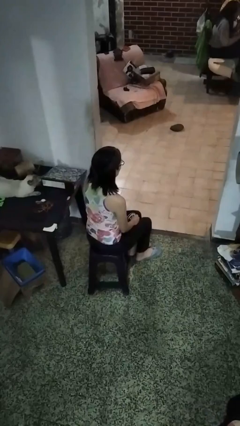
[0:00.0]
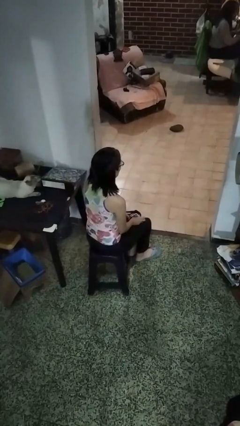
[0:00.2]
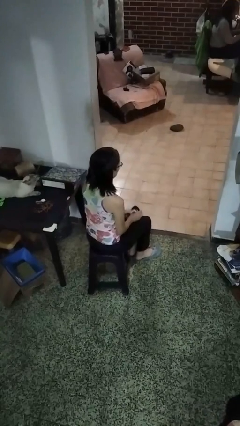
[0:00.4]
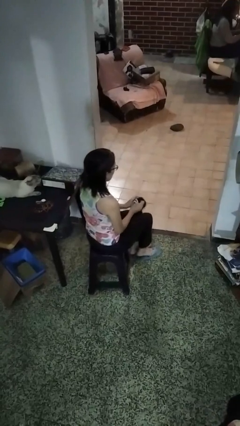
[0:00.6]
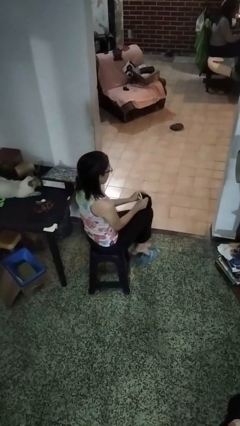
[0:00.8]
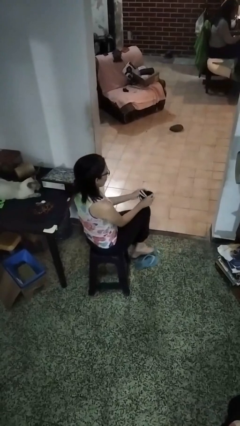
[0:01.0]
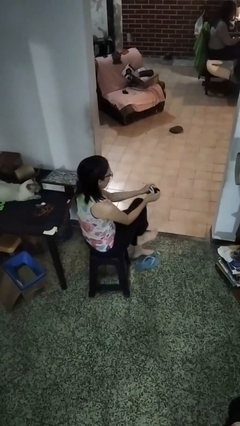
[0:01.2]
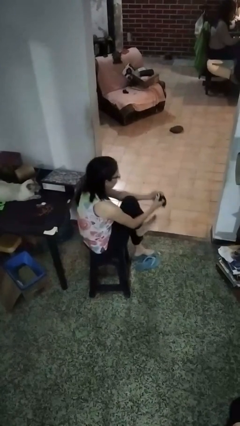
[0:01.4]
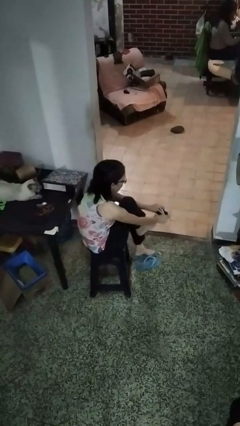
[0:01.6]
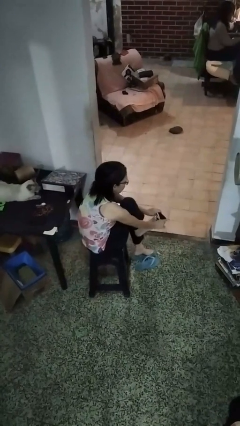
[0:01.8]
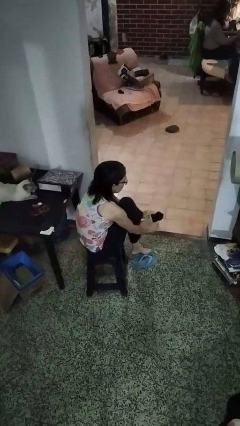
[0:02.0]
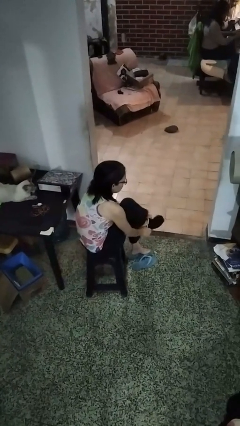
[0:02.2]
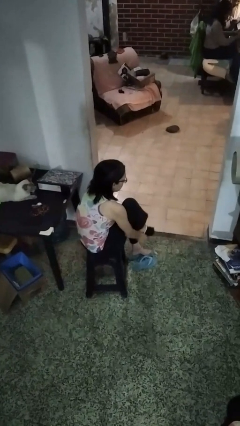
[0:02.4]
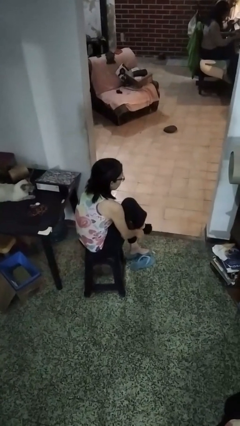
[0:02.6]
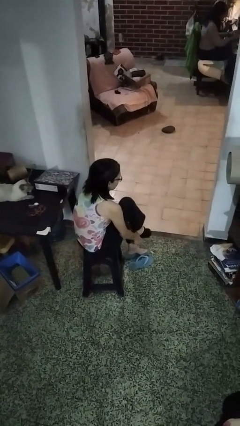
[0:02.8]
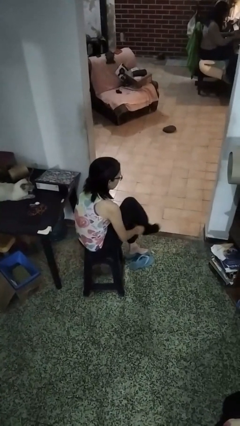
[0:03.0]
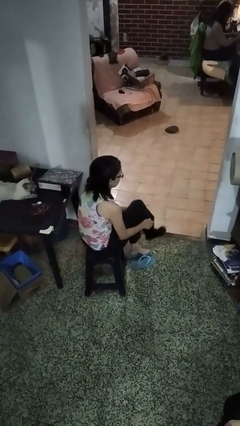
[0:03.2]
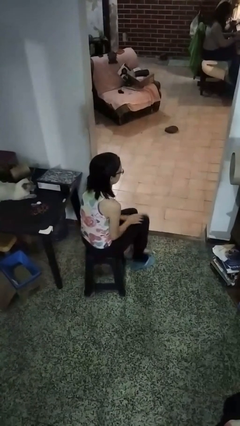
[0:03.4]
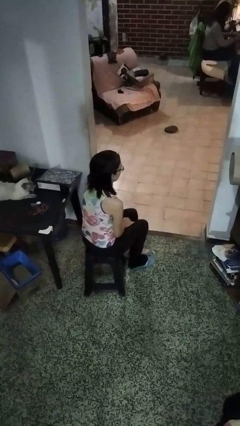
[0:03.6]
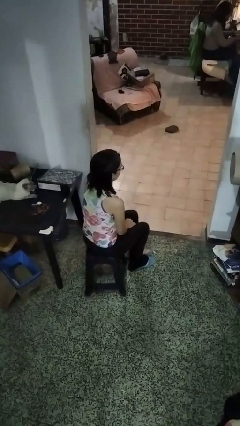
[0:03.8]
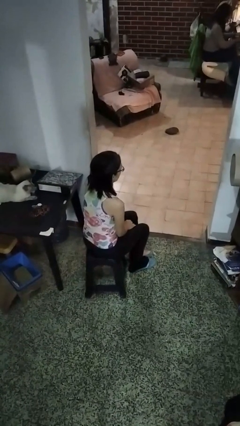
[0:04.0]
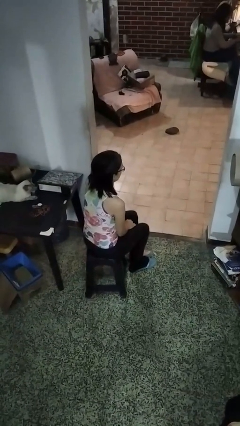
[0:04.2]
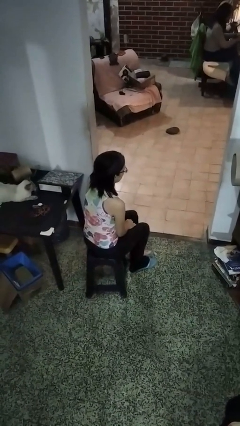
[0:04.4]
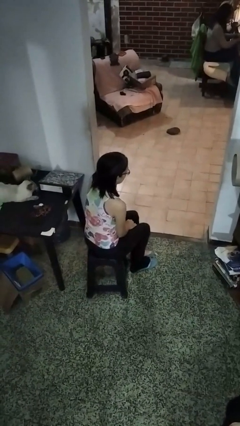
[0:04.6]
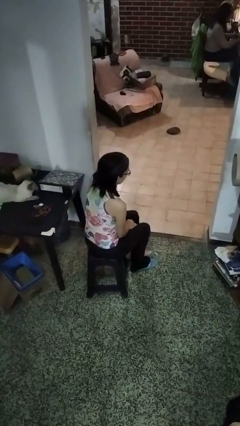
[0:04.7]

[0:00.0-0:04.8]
person puts on socks

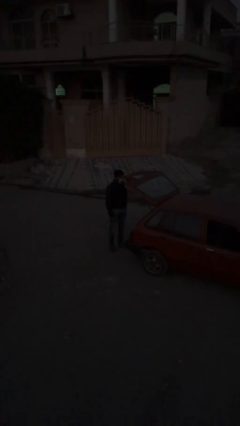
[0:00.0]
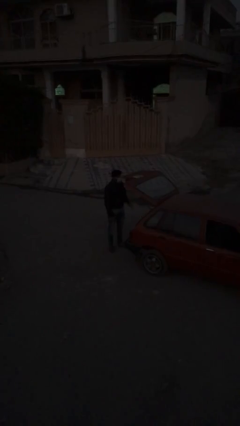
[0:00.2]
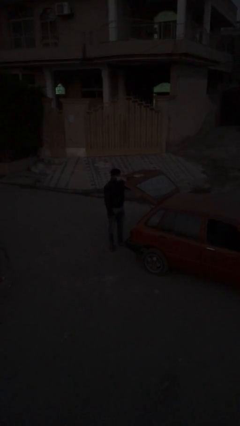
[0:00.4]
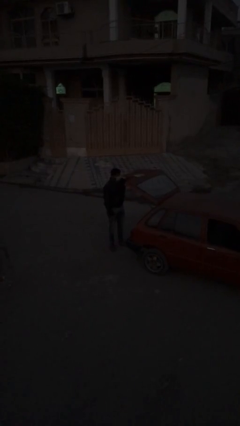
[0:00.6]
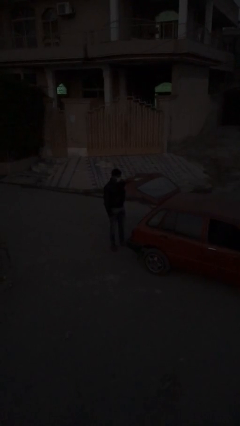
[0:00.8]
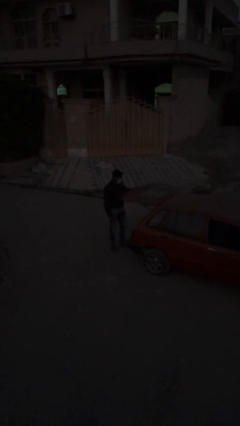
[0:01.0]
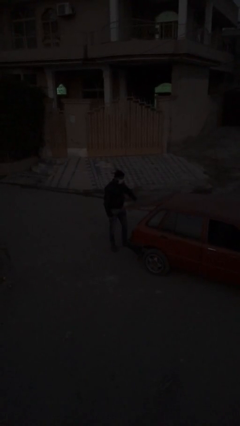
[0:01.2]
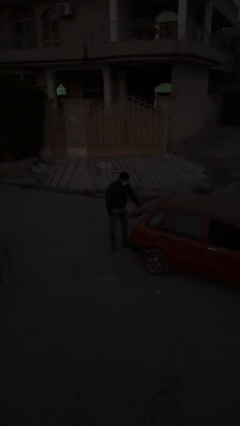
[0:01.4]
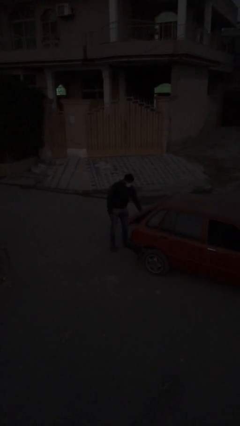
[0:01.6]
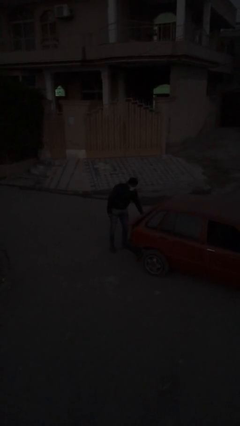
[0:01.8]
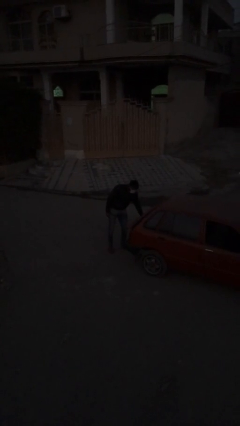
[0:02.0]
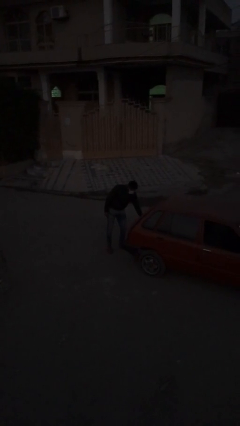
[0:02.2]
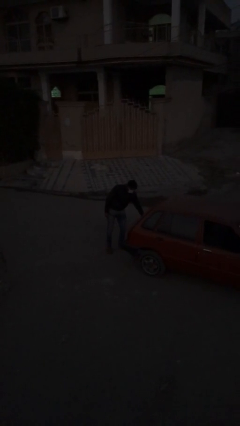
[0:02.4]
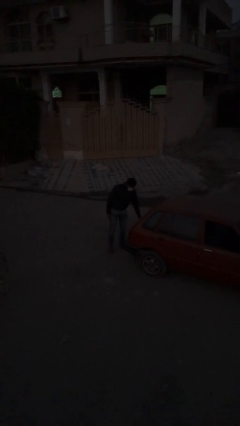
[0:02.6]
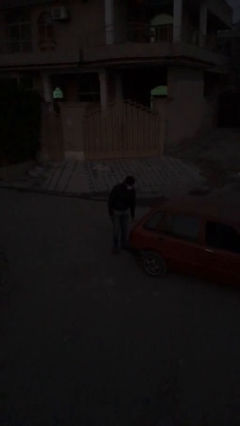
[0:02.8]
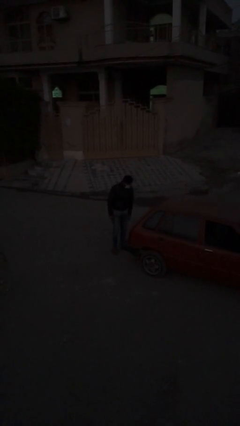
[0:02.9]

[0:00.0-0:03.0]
person closes car trunk

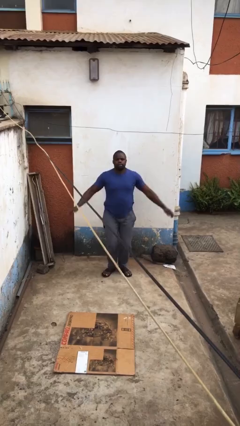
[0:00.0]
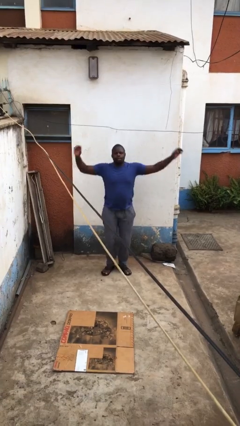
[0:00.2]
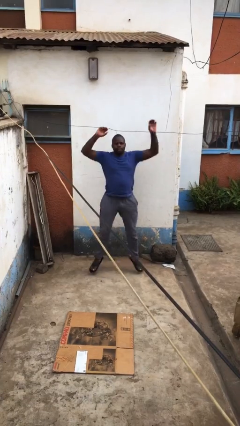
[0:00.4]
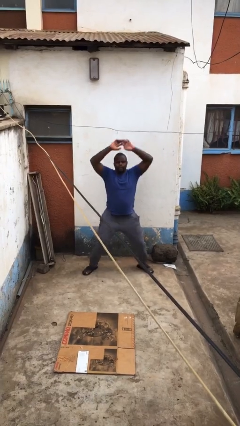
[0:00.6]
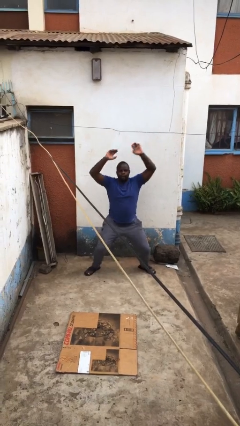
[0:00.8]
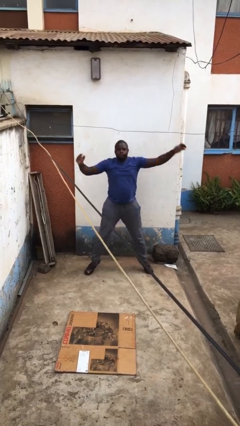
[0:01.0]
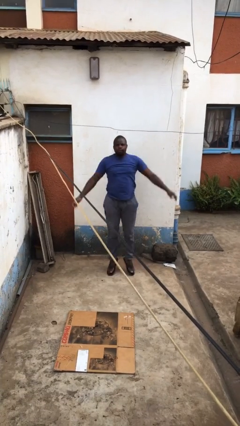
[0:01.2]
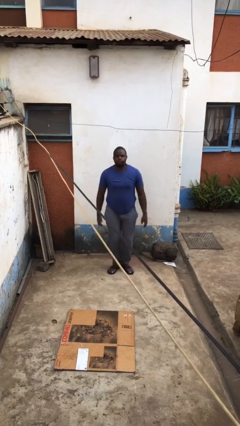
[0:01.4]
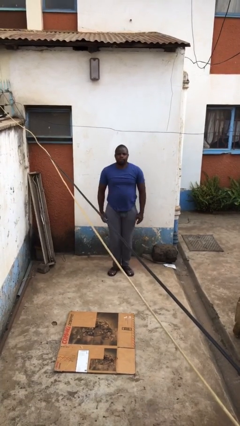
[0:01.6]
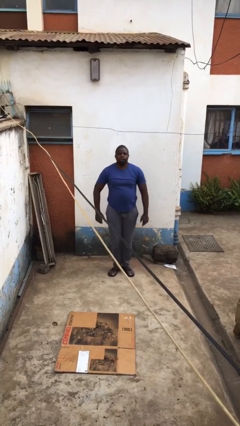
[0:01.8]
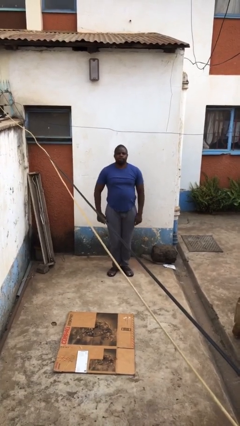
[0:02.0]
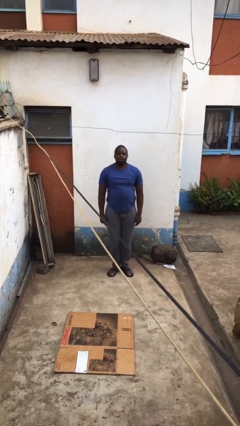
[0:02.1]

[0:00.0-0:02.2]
person exercises with jumping jacks

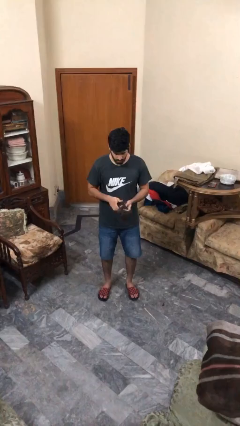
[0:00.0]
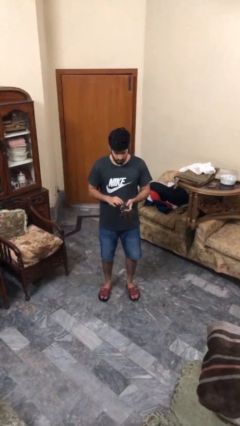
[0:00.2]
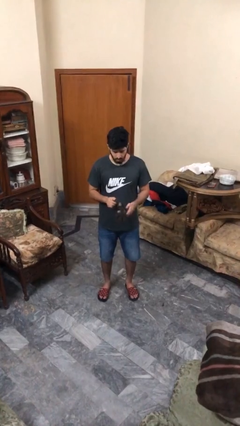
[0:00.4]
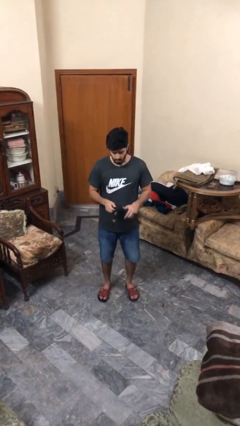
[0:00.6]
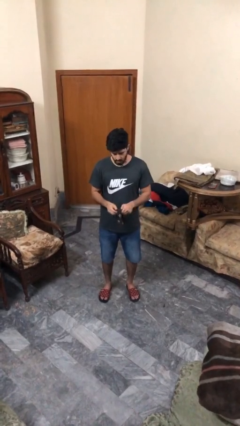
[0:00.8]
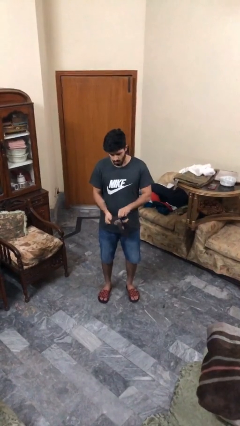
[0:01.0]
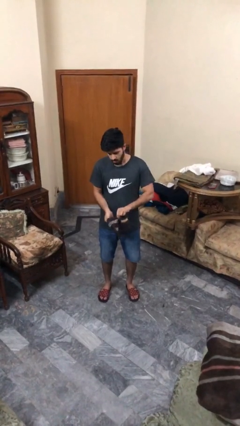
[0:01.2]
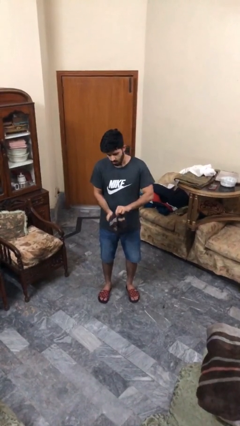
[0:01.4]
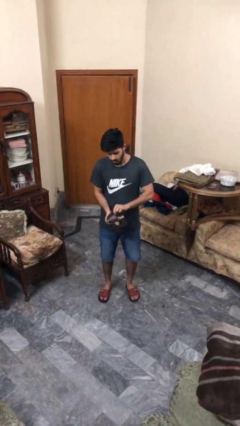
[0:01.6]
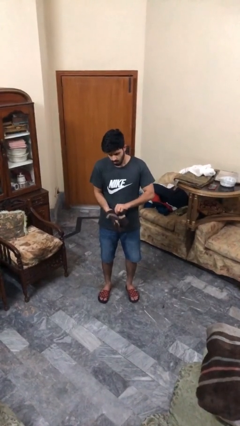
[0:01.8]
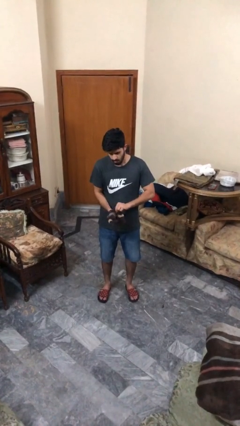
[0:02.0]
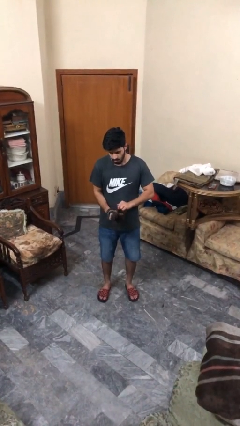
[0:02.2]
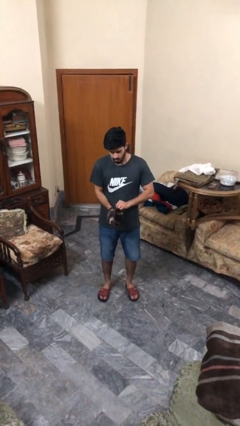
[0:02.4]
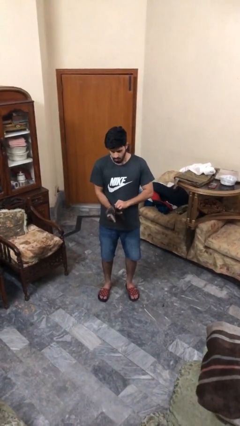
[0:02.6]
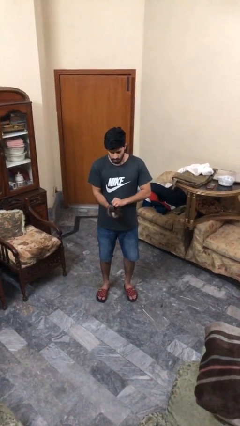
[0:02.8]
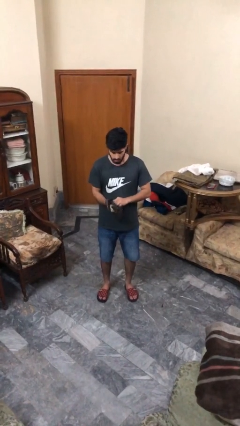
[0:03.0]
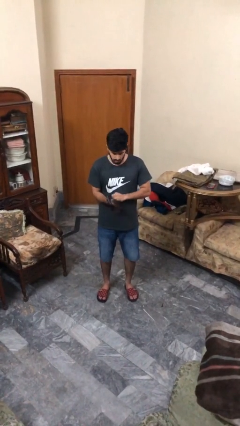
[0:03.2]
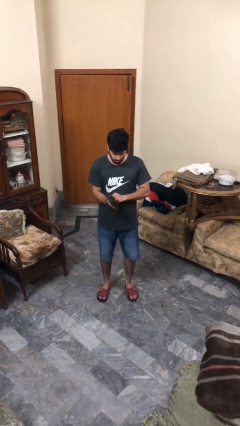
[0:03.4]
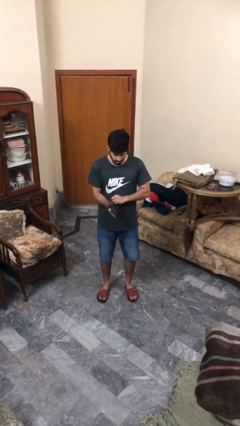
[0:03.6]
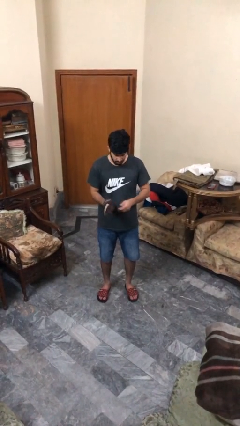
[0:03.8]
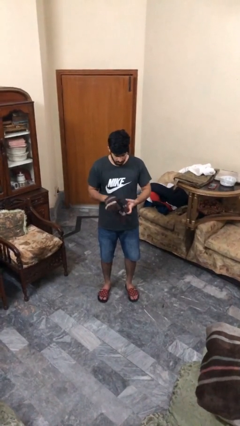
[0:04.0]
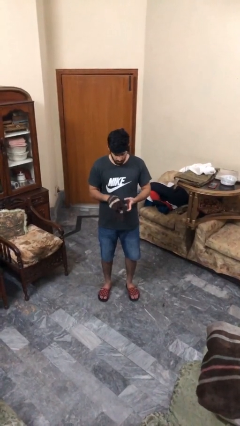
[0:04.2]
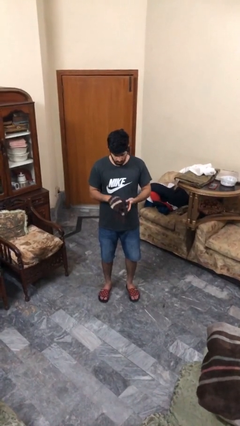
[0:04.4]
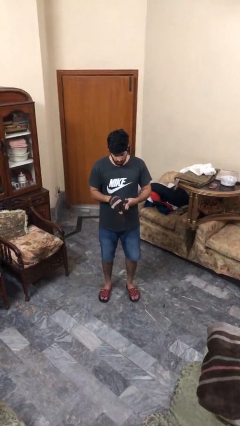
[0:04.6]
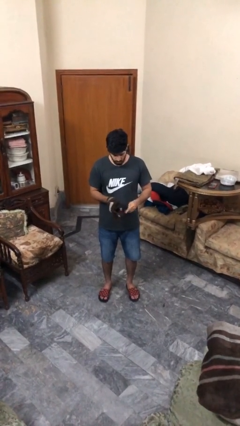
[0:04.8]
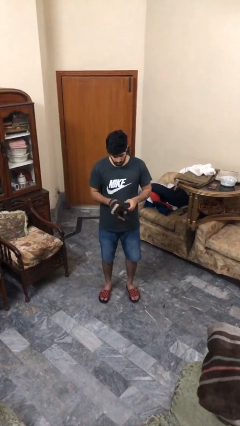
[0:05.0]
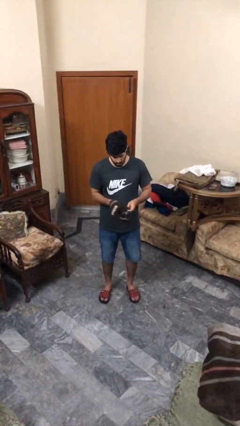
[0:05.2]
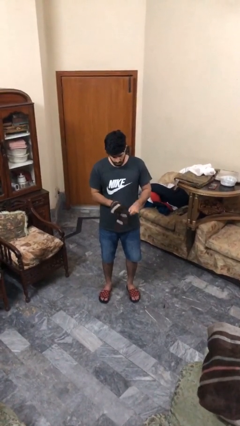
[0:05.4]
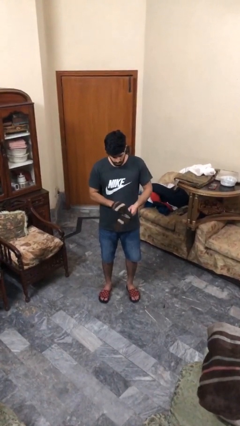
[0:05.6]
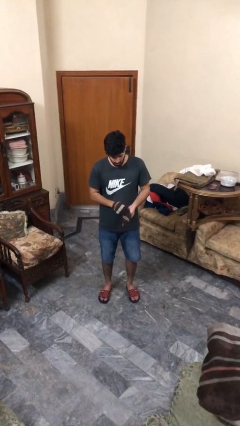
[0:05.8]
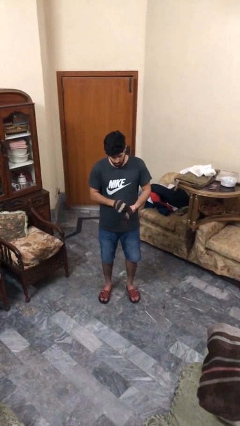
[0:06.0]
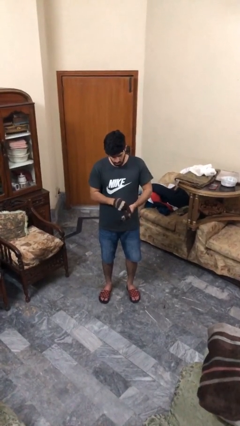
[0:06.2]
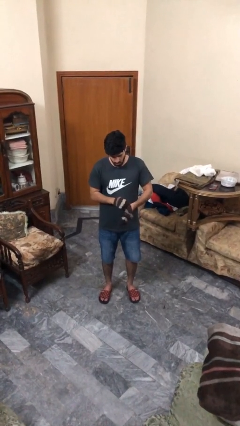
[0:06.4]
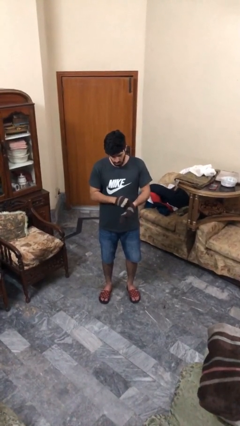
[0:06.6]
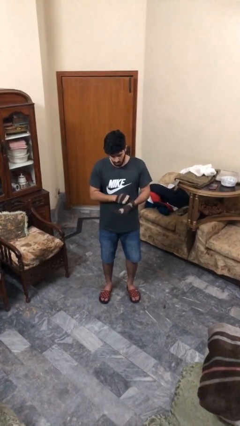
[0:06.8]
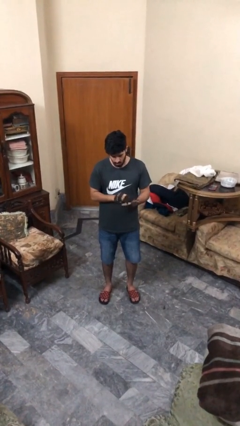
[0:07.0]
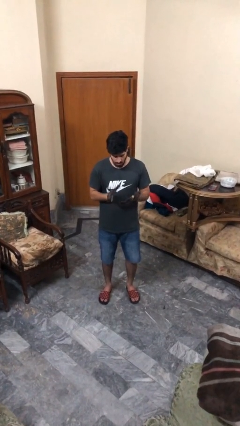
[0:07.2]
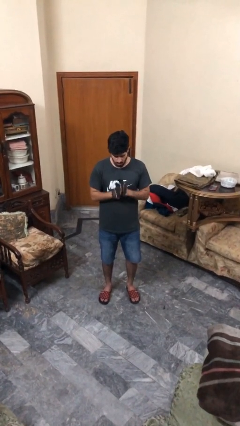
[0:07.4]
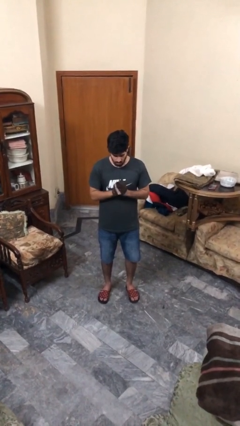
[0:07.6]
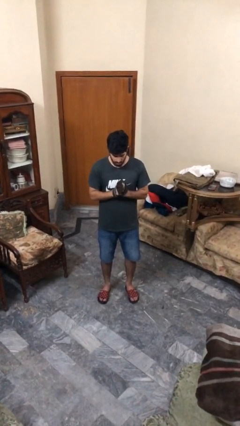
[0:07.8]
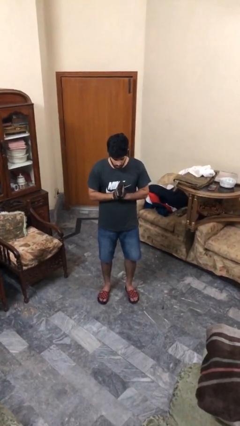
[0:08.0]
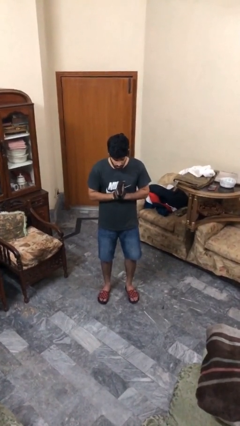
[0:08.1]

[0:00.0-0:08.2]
person puts on gloves
